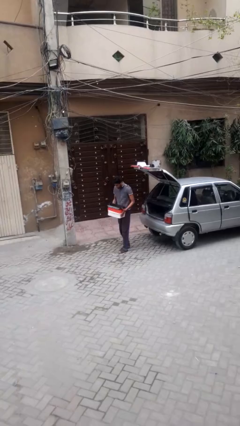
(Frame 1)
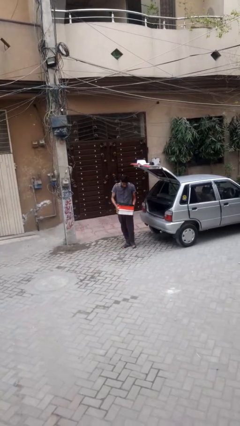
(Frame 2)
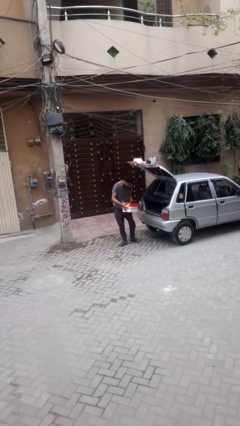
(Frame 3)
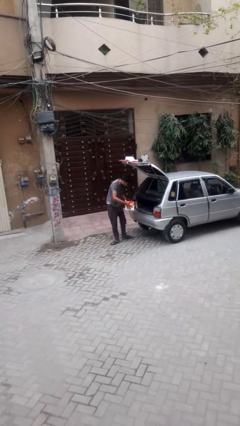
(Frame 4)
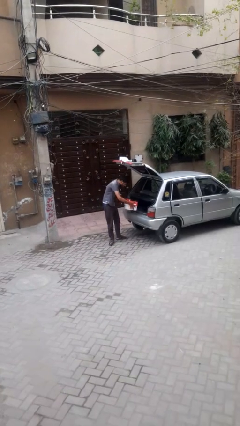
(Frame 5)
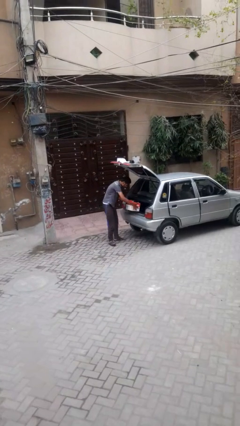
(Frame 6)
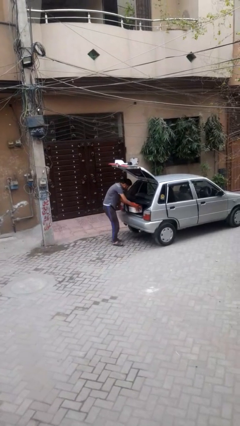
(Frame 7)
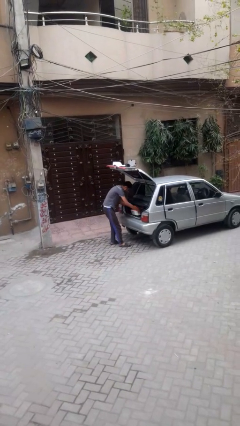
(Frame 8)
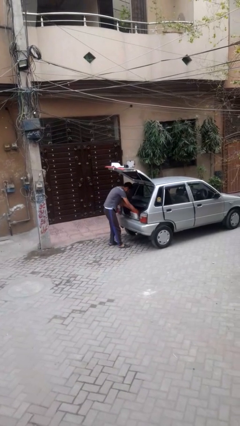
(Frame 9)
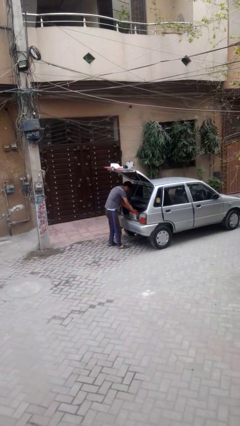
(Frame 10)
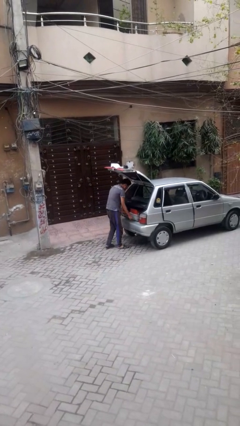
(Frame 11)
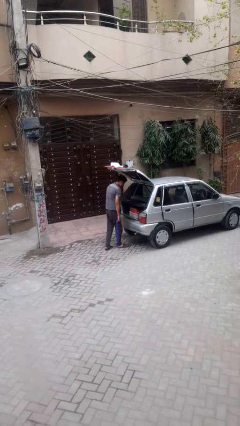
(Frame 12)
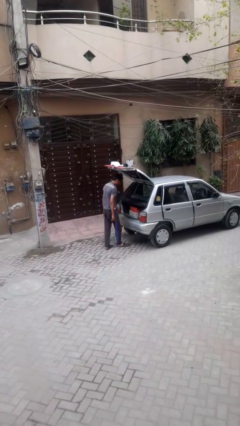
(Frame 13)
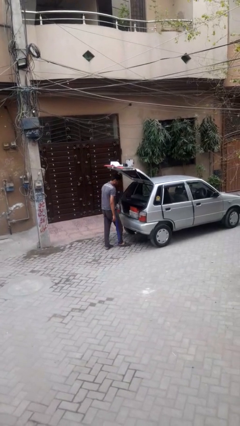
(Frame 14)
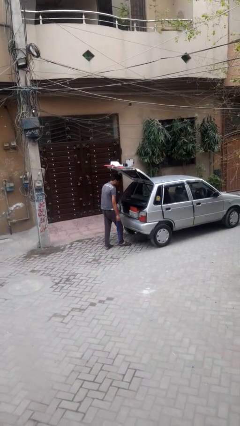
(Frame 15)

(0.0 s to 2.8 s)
person loads car

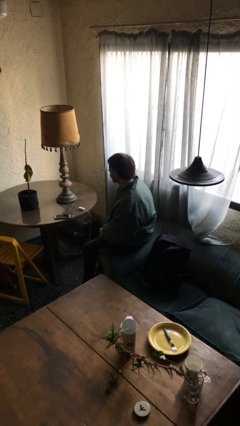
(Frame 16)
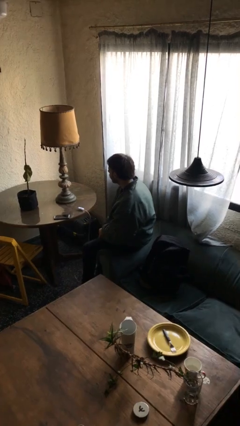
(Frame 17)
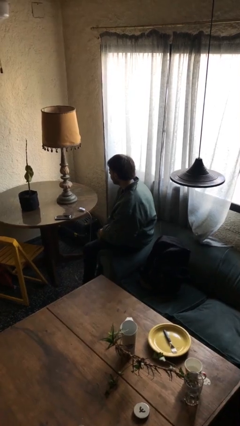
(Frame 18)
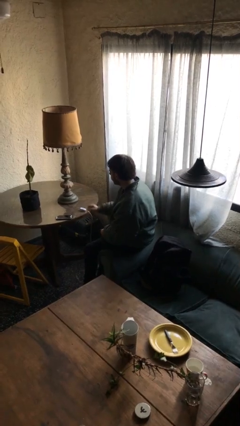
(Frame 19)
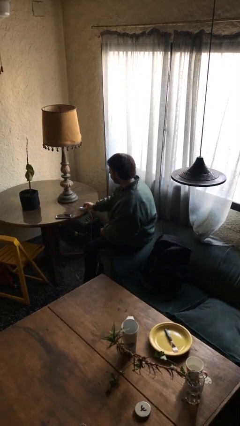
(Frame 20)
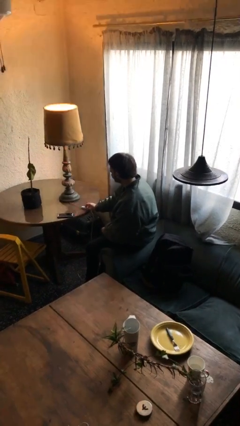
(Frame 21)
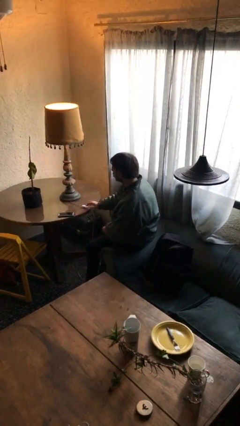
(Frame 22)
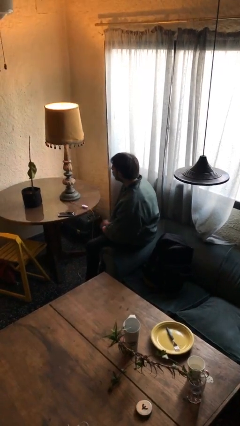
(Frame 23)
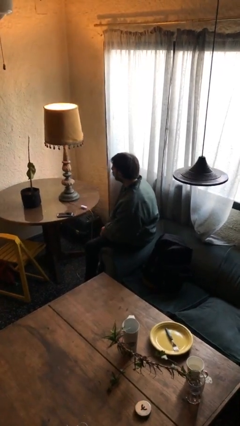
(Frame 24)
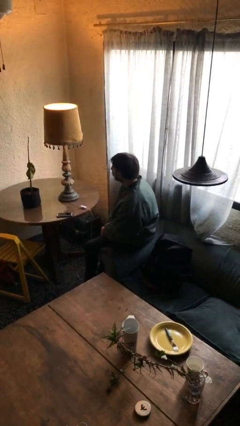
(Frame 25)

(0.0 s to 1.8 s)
person turns on lamp

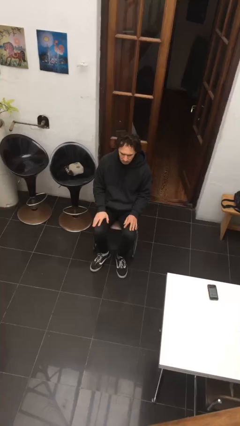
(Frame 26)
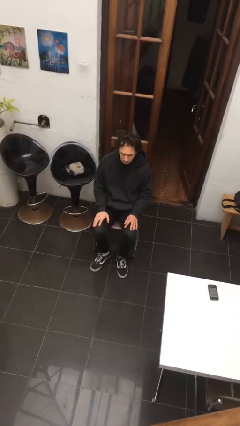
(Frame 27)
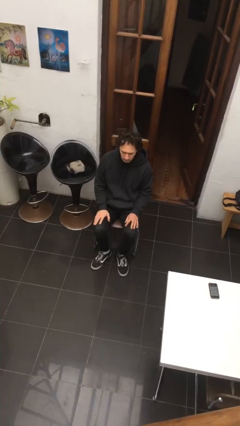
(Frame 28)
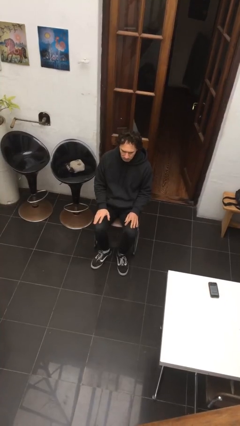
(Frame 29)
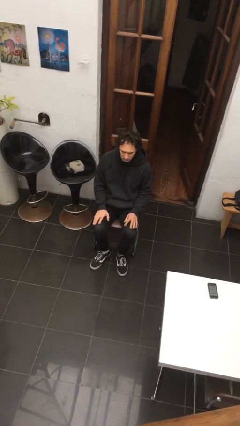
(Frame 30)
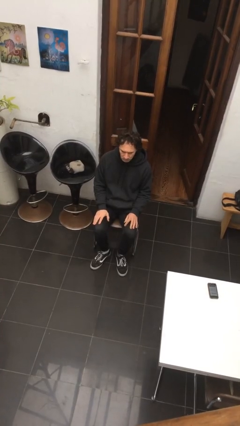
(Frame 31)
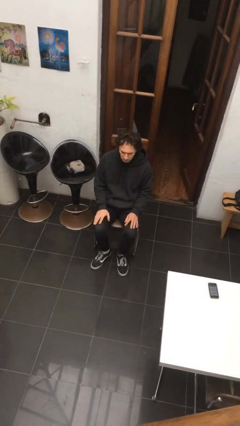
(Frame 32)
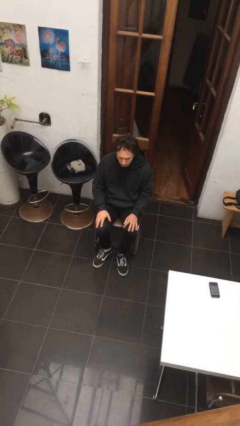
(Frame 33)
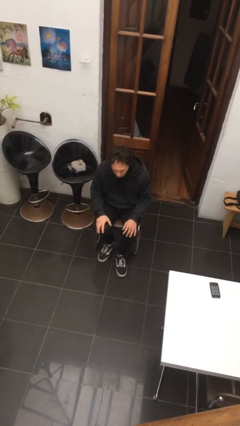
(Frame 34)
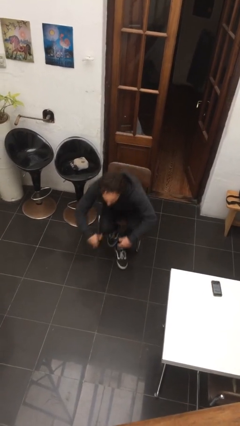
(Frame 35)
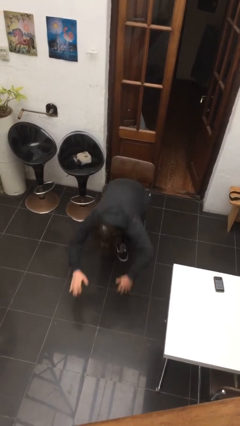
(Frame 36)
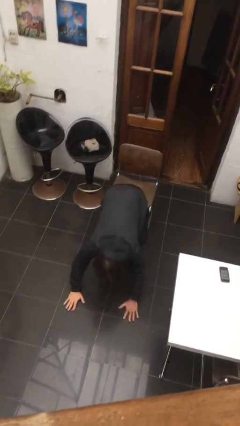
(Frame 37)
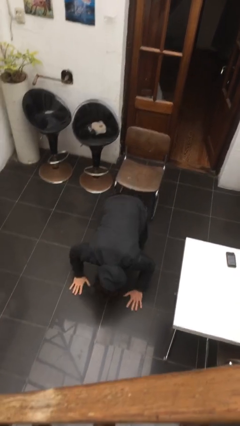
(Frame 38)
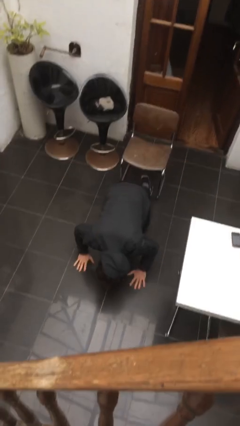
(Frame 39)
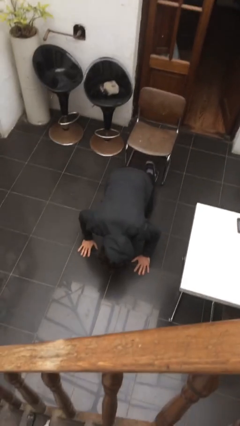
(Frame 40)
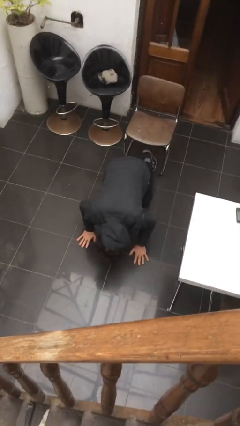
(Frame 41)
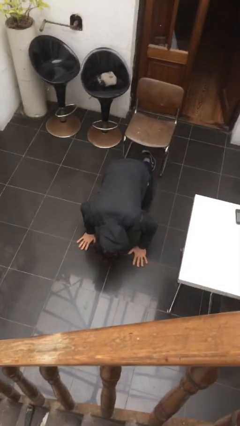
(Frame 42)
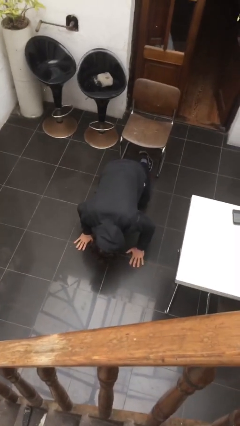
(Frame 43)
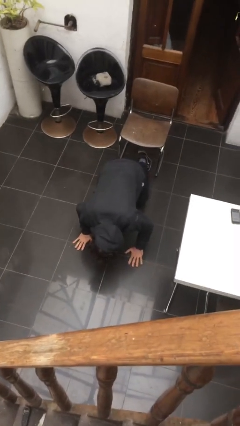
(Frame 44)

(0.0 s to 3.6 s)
person falls from chair

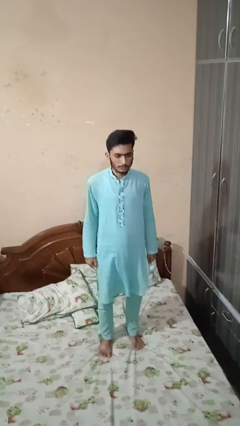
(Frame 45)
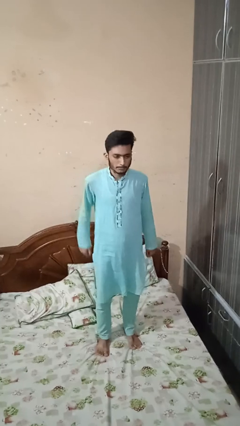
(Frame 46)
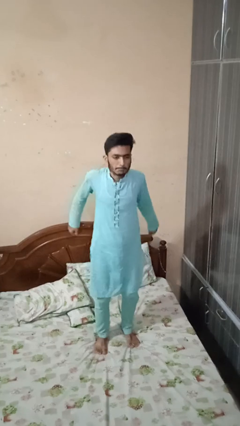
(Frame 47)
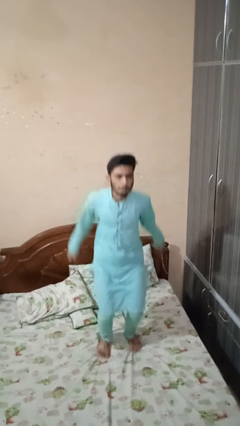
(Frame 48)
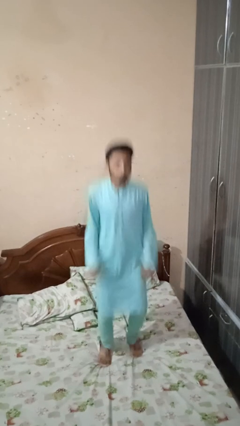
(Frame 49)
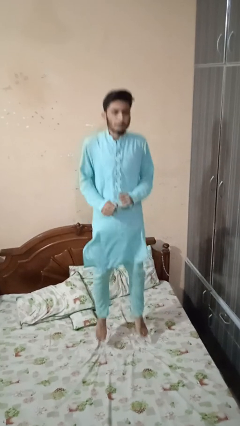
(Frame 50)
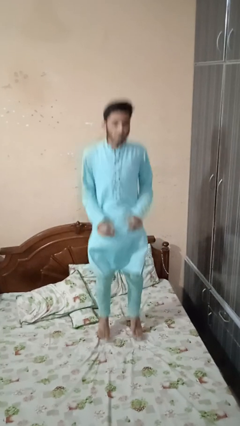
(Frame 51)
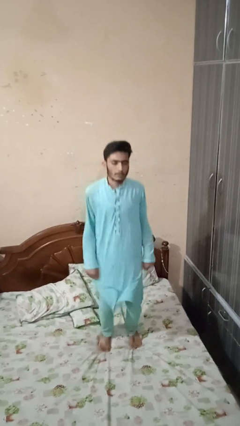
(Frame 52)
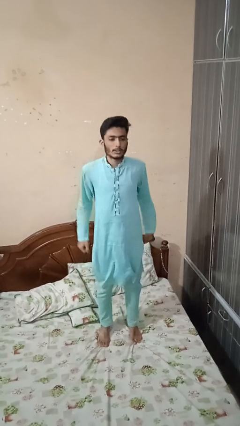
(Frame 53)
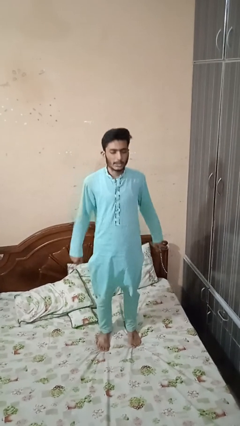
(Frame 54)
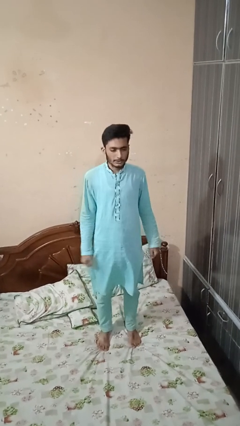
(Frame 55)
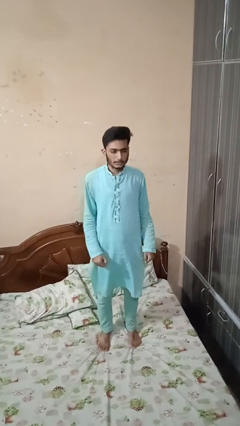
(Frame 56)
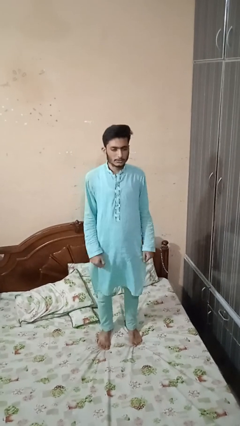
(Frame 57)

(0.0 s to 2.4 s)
person jumps on bed

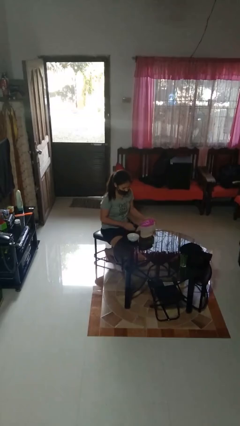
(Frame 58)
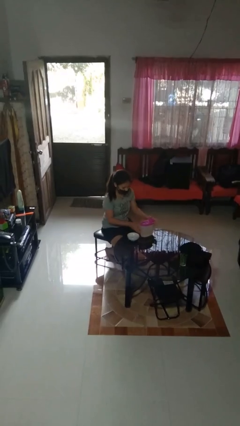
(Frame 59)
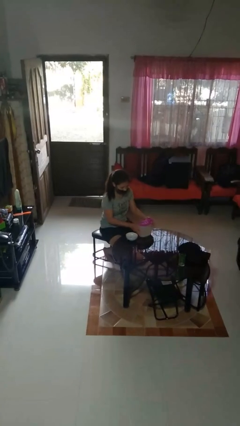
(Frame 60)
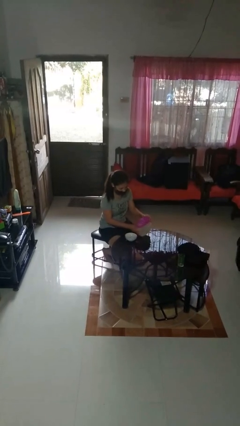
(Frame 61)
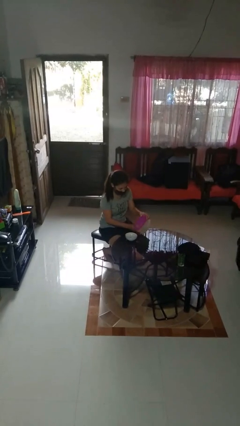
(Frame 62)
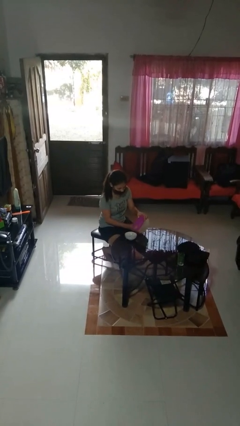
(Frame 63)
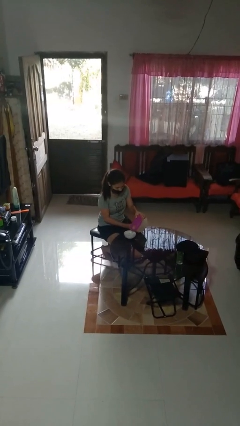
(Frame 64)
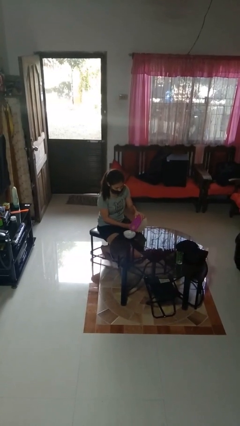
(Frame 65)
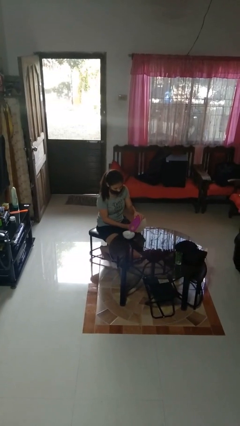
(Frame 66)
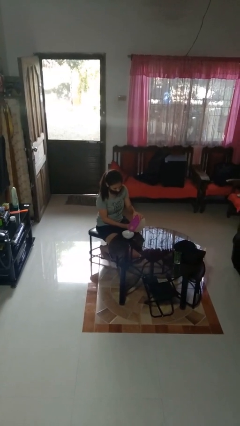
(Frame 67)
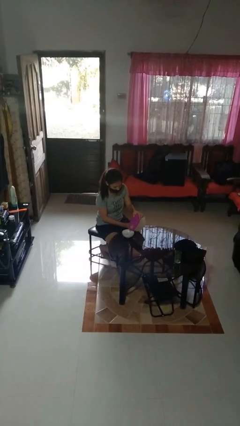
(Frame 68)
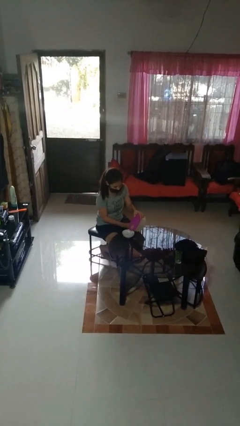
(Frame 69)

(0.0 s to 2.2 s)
person pours into bowl

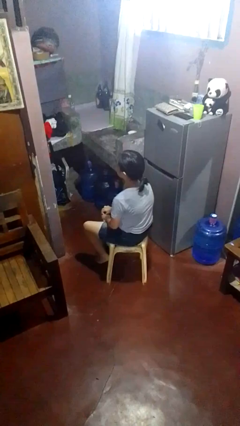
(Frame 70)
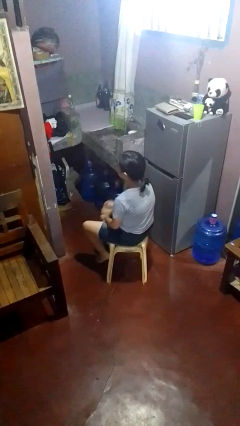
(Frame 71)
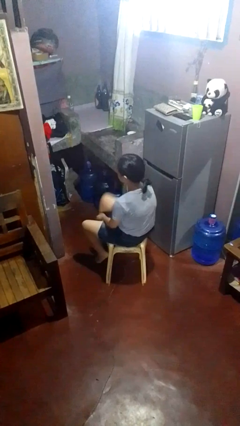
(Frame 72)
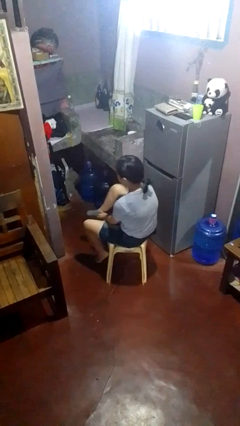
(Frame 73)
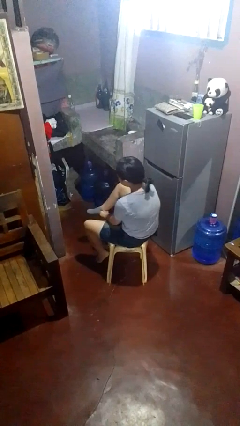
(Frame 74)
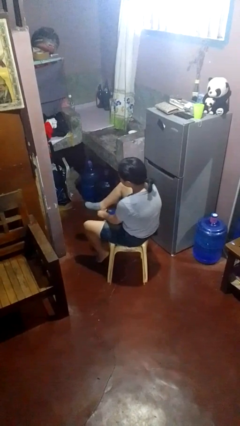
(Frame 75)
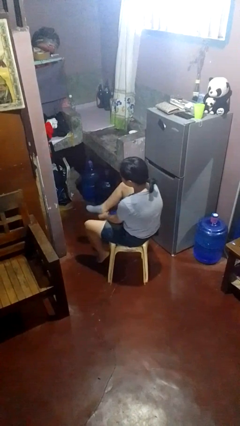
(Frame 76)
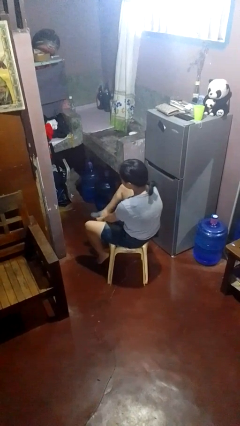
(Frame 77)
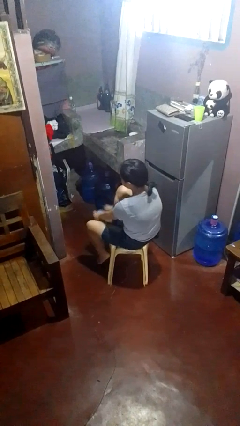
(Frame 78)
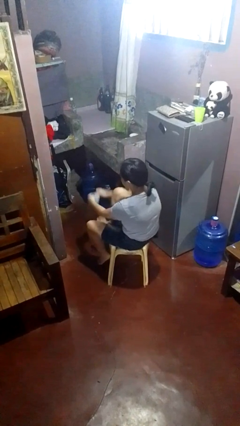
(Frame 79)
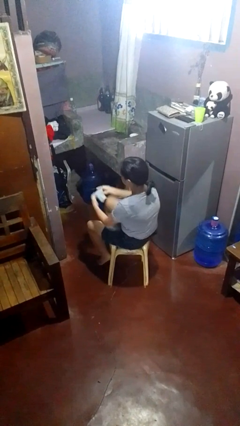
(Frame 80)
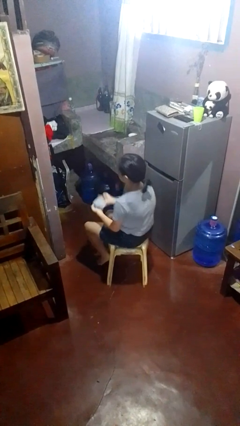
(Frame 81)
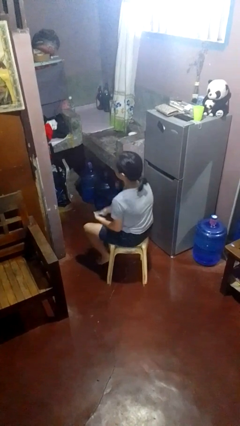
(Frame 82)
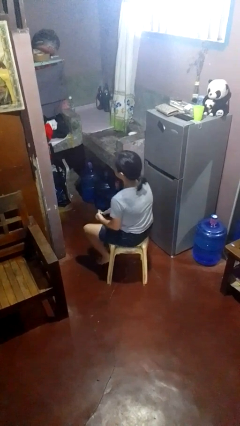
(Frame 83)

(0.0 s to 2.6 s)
person takes off socks

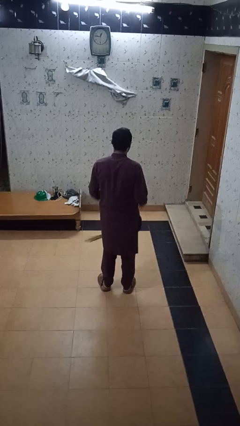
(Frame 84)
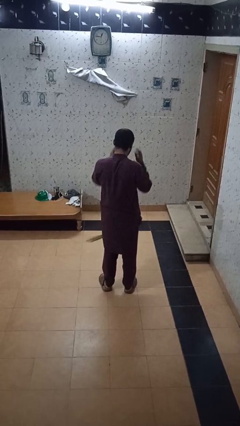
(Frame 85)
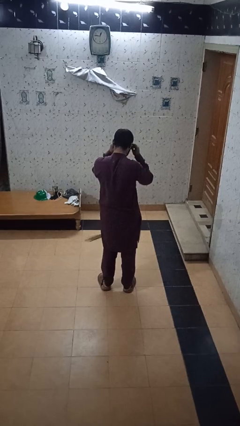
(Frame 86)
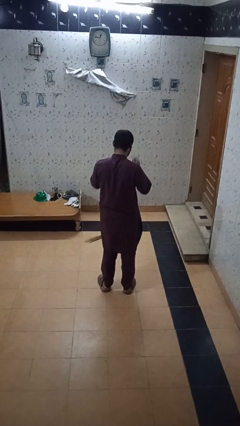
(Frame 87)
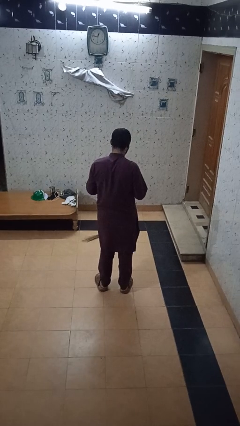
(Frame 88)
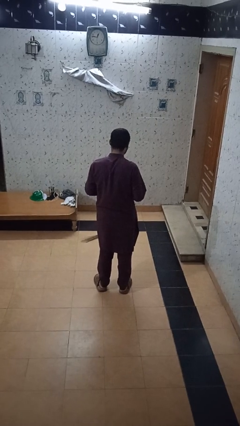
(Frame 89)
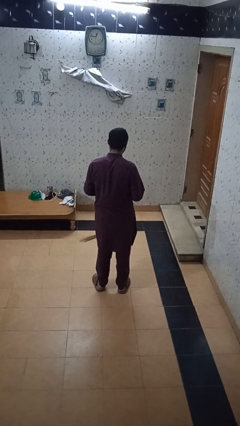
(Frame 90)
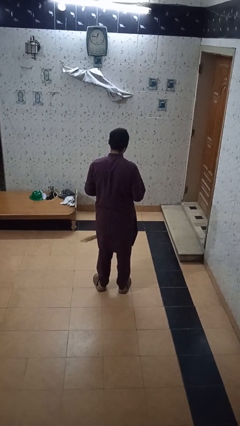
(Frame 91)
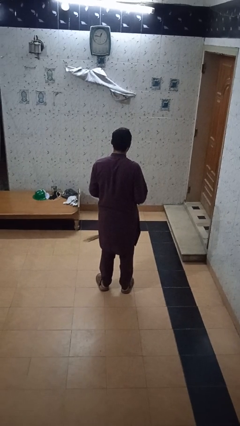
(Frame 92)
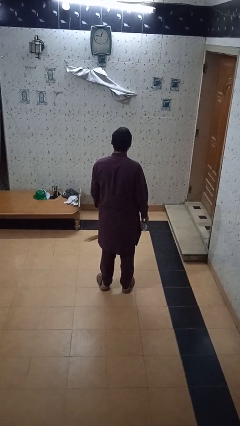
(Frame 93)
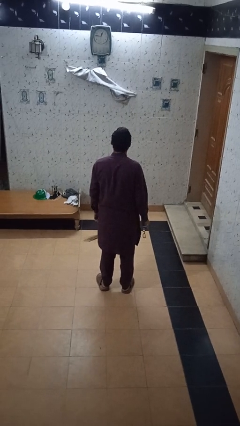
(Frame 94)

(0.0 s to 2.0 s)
person takes off glasses
